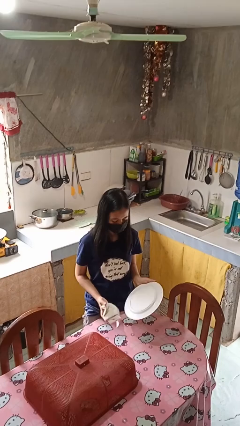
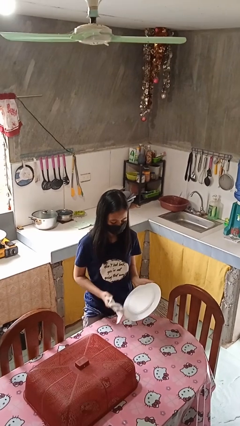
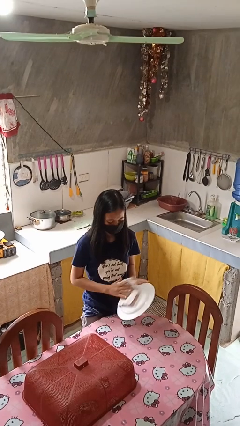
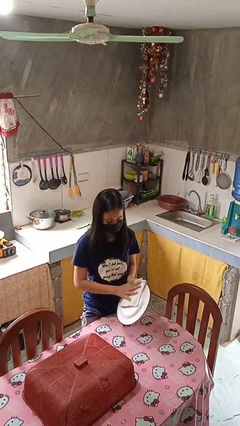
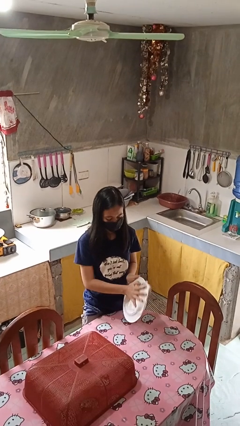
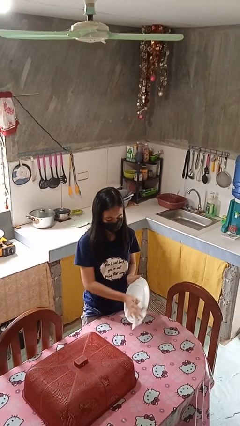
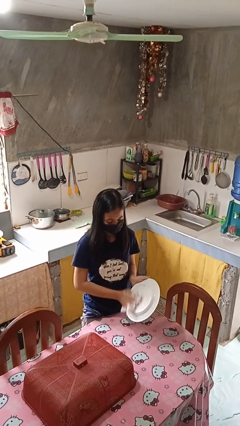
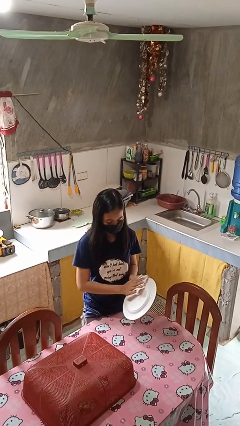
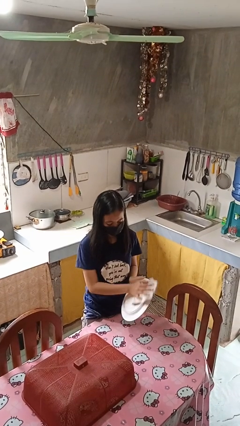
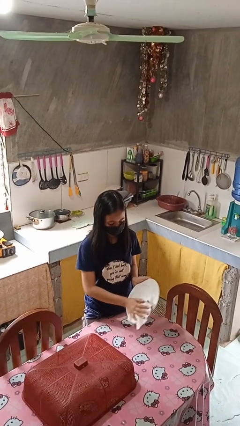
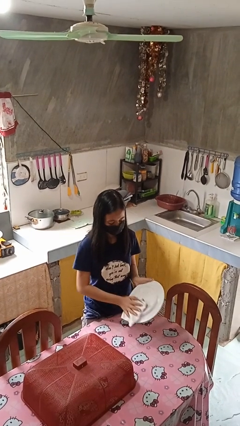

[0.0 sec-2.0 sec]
person dries dish

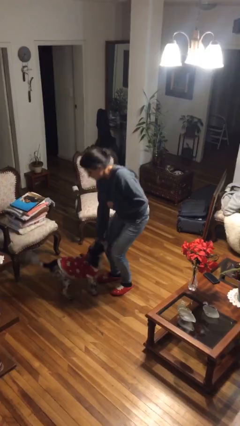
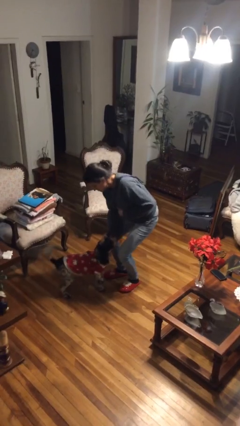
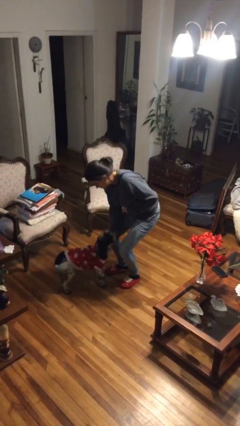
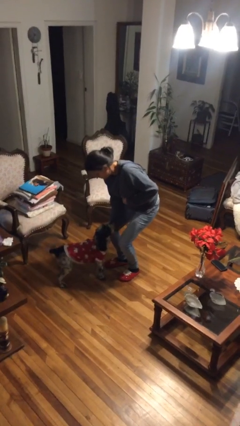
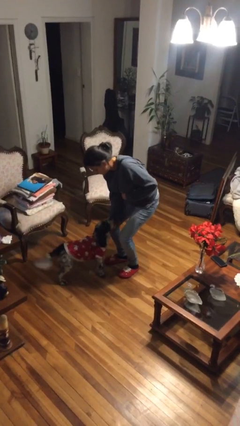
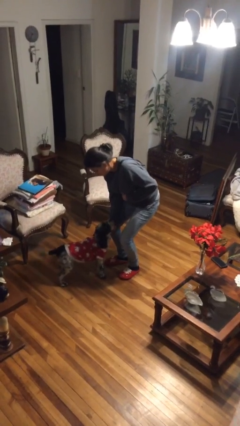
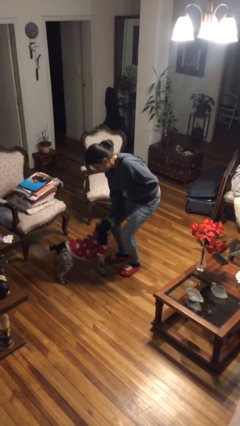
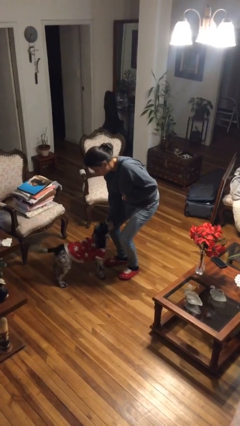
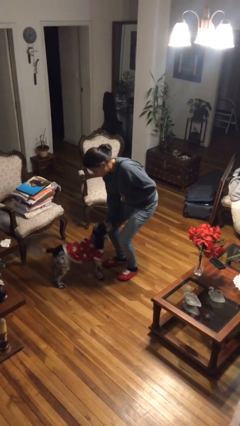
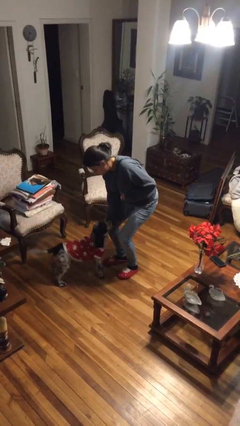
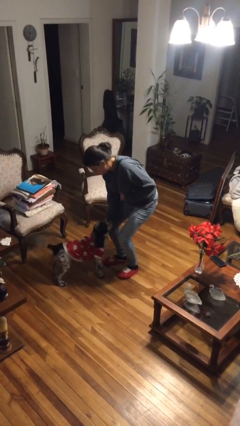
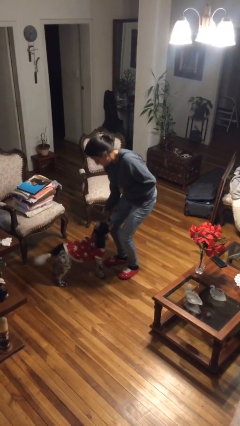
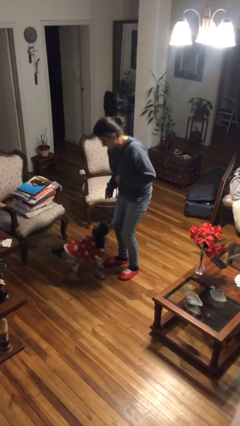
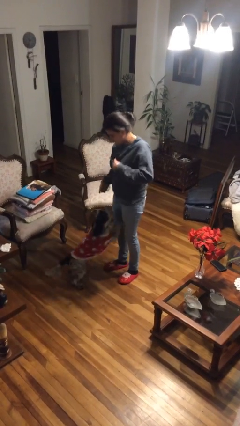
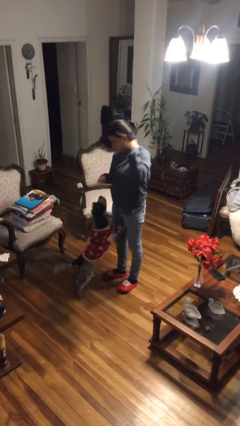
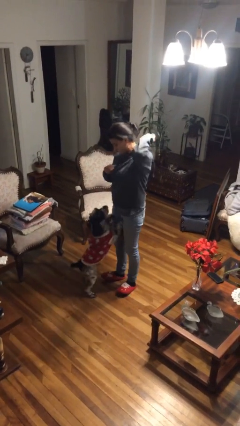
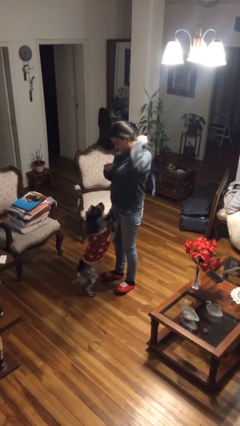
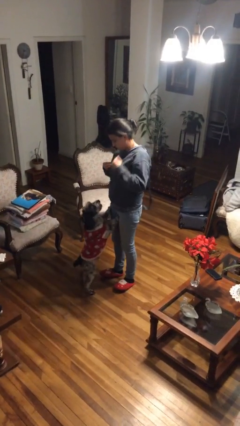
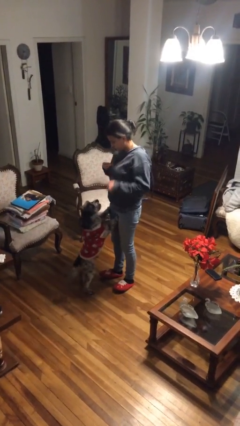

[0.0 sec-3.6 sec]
person unattaches leash from dog

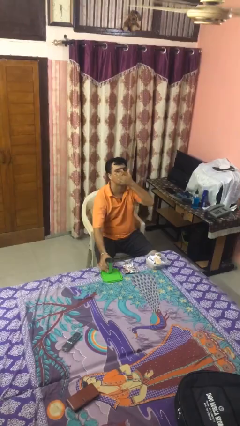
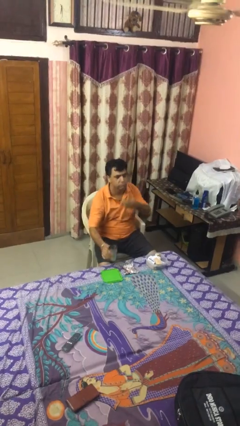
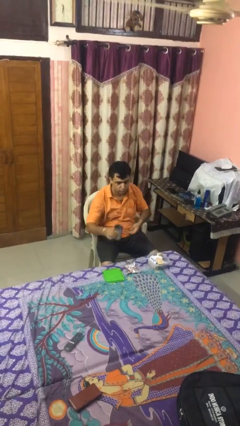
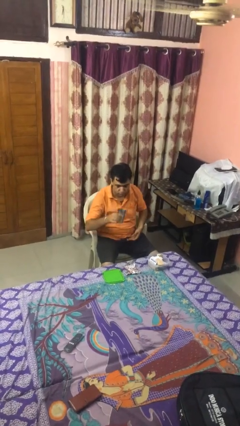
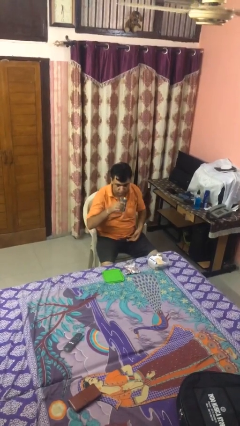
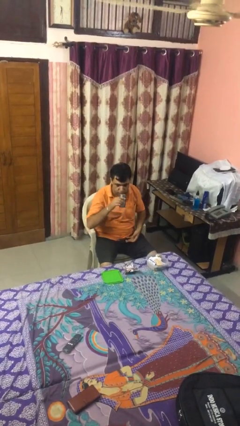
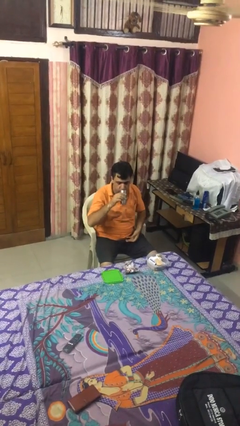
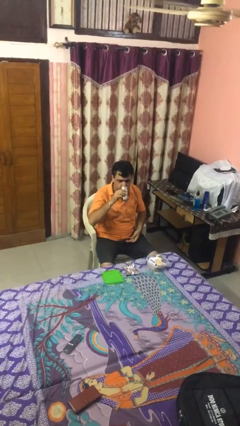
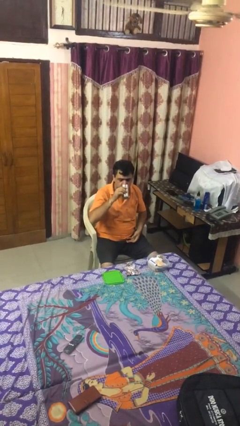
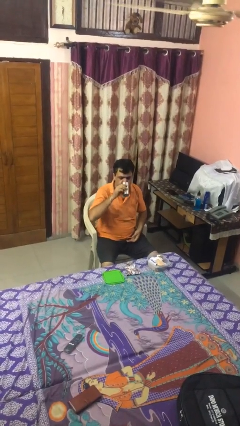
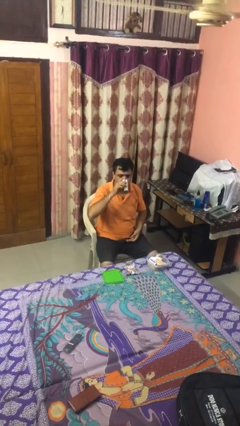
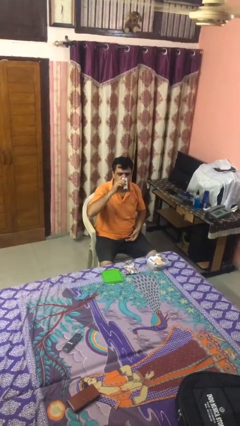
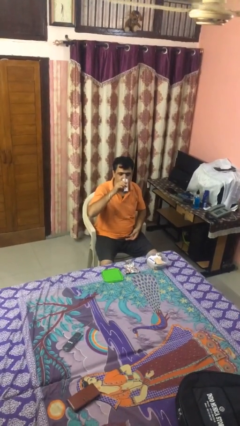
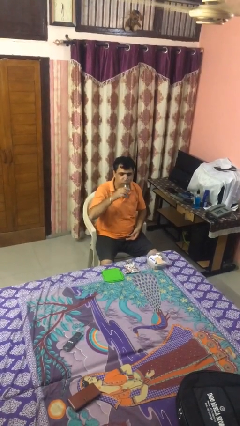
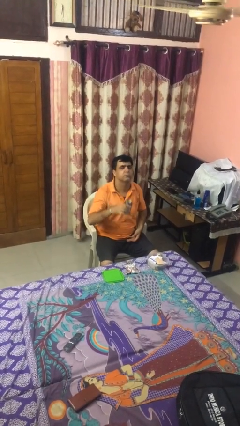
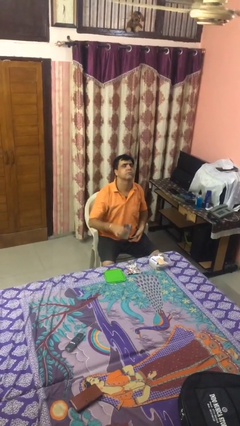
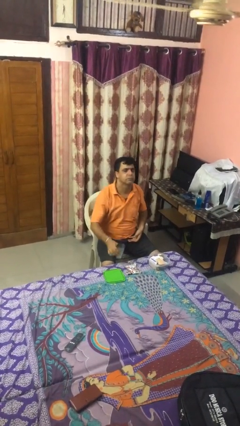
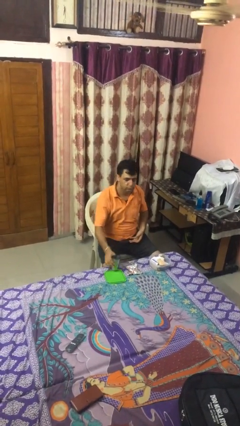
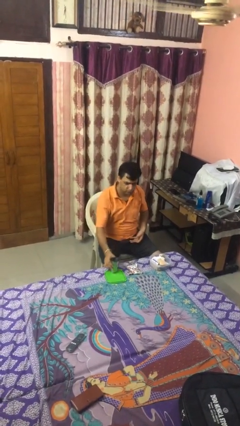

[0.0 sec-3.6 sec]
person drinks from cup

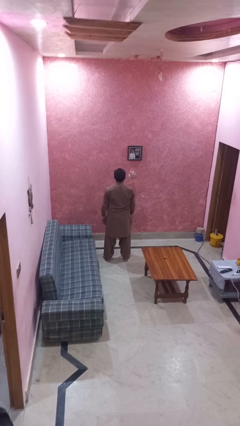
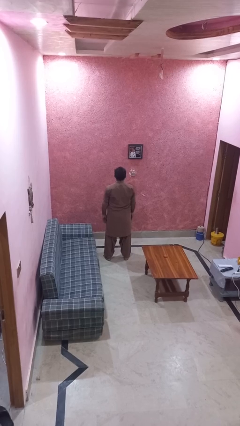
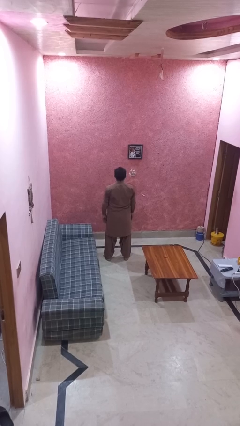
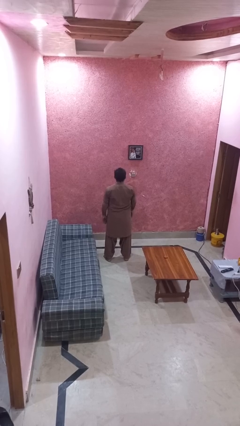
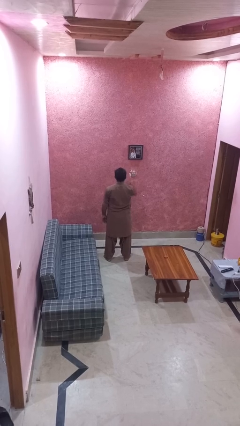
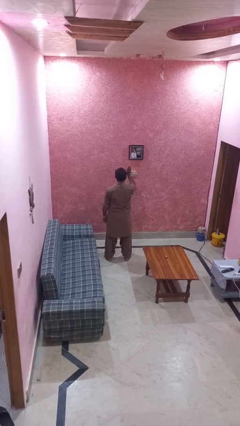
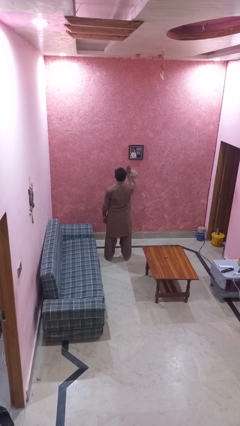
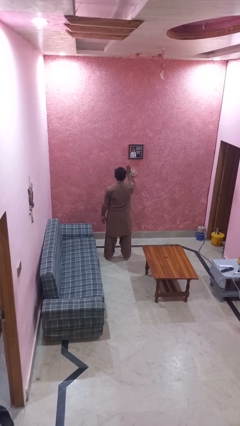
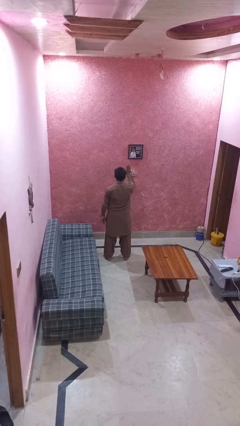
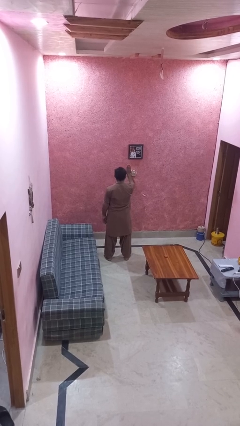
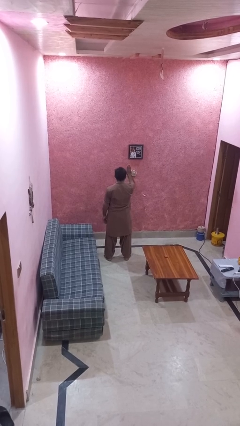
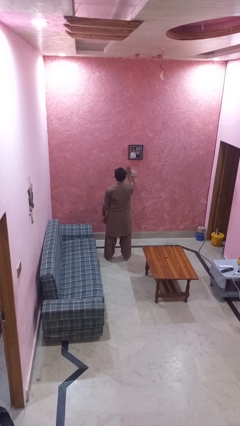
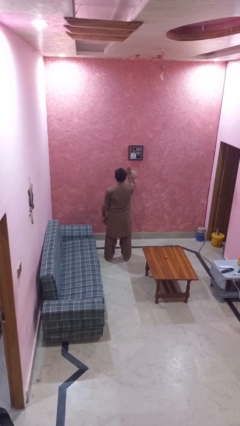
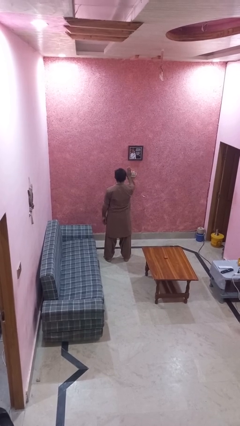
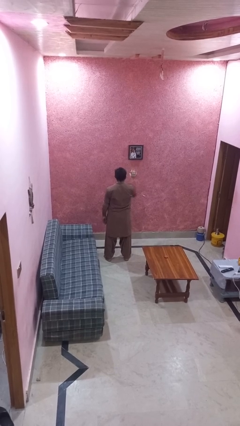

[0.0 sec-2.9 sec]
person gestures stop

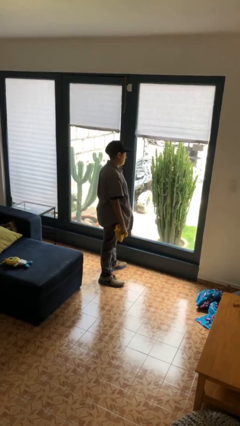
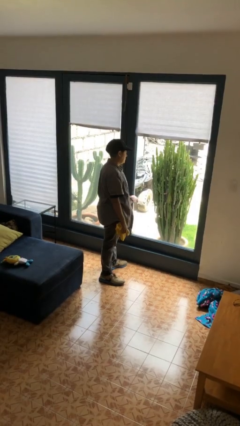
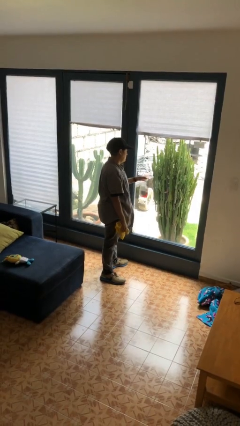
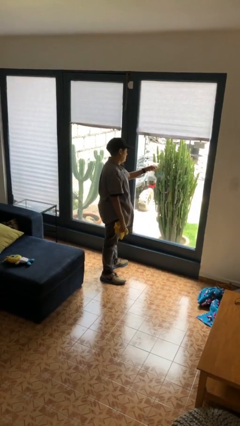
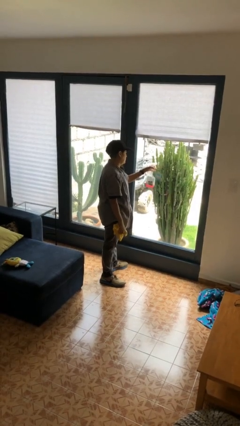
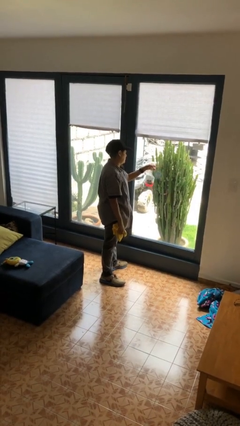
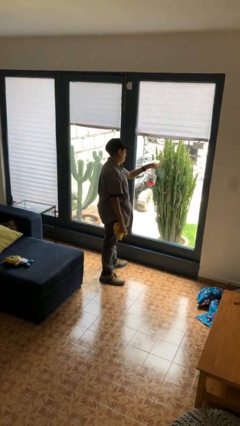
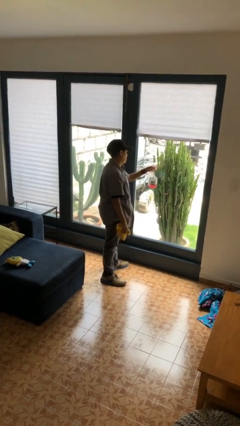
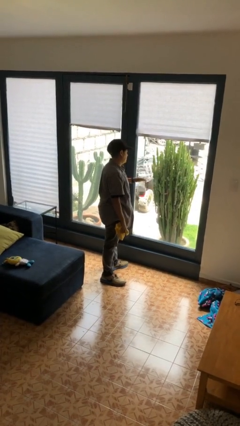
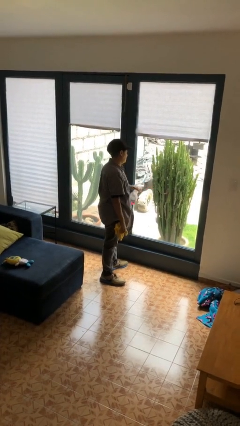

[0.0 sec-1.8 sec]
person sprays from bottle

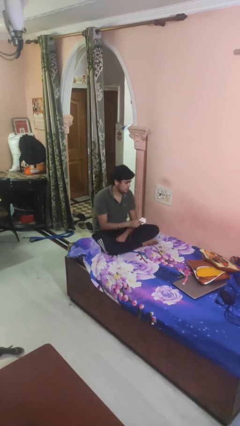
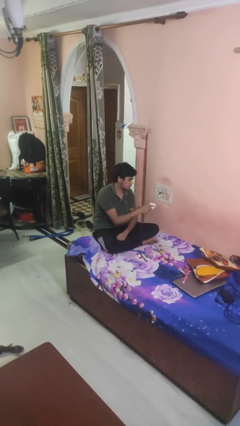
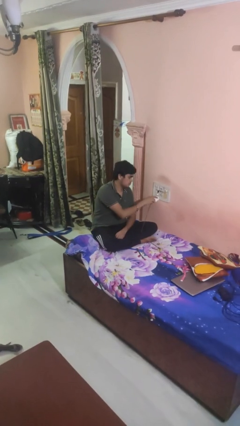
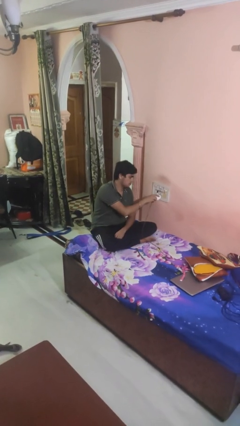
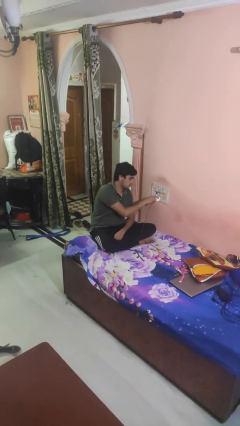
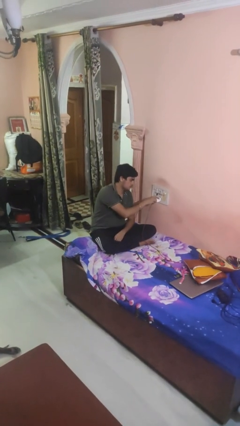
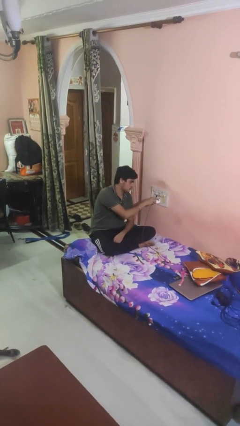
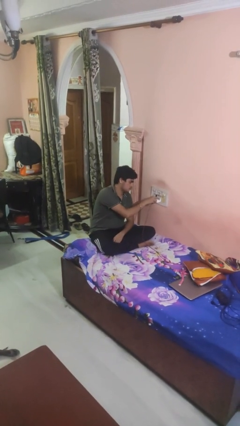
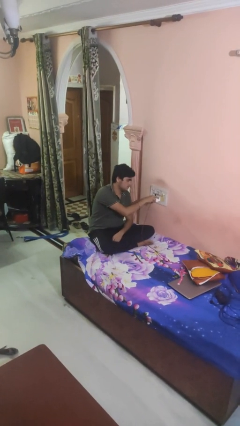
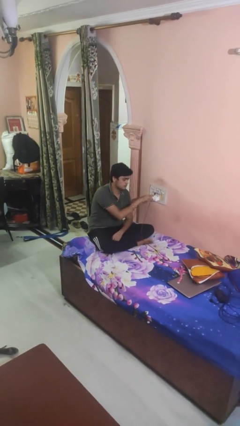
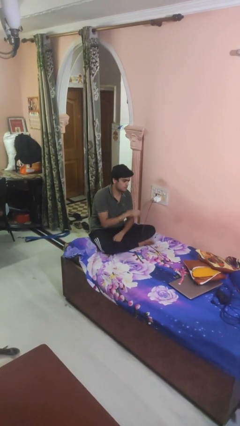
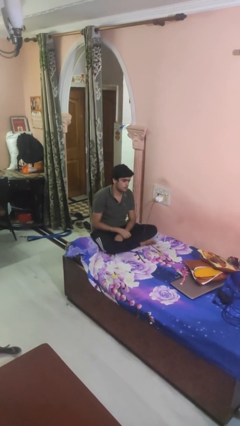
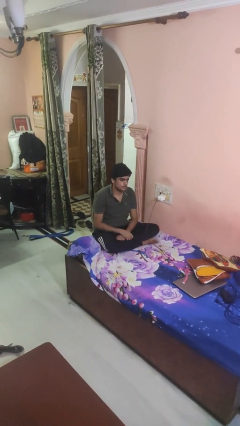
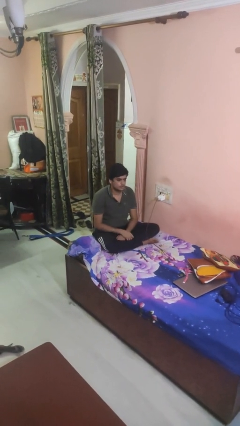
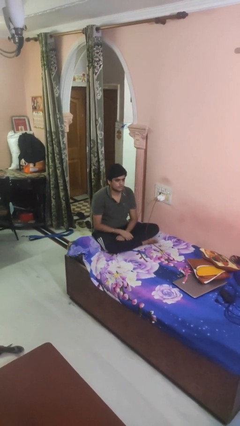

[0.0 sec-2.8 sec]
person plugs into electrical socket

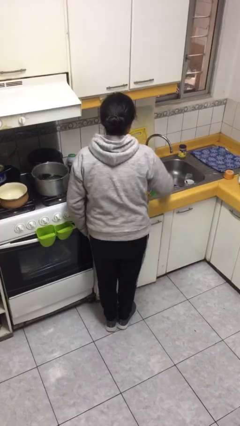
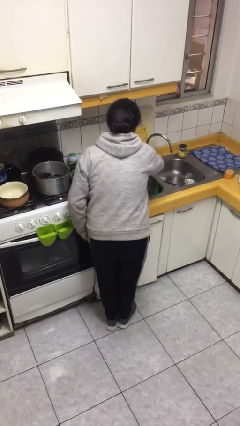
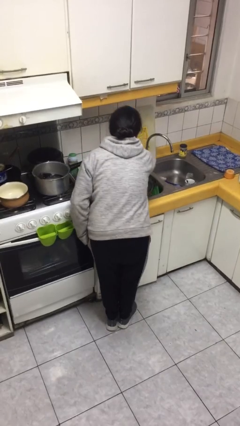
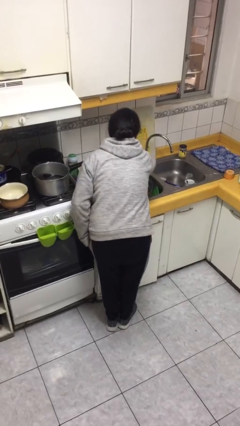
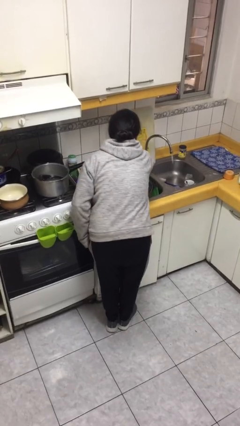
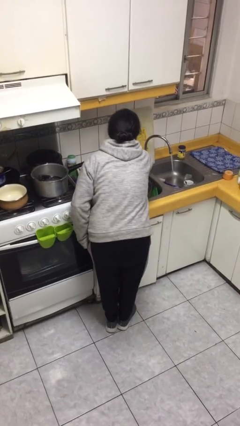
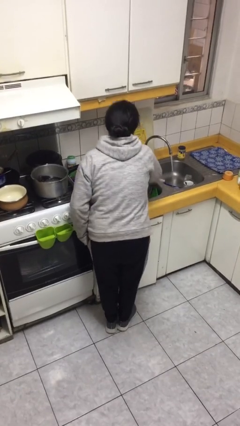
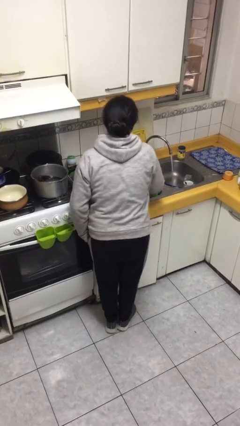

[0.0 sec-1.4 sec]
person turns on faucet
